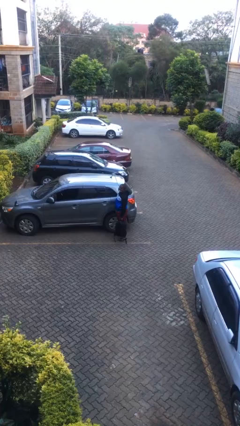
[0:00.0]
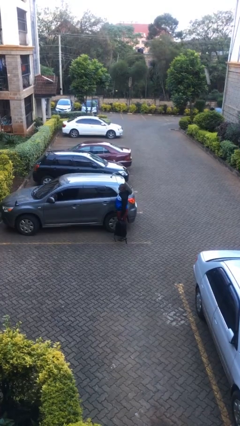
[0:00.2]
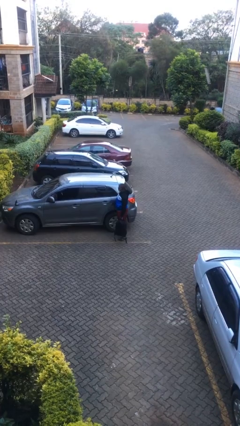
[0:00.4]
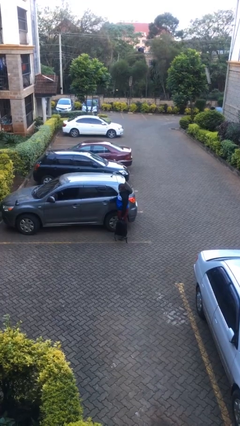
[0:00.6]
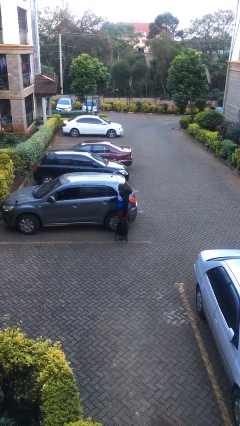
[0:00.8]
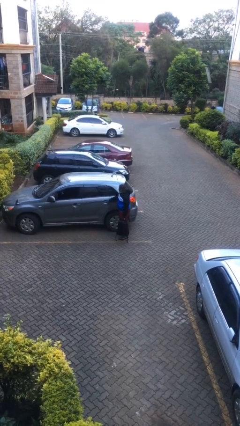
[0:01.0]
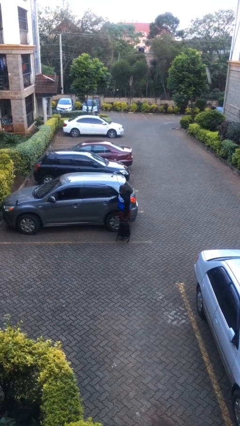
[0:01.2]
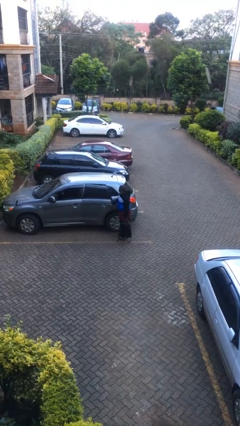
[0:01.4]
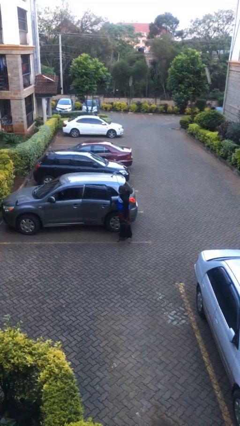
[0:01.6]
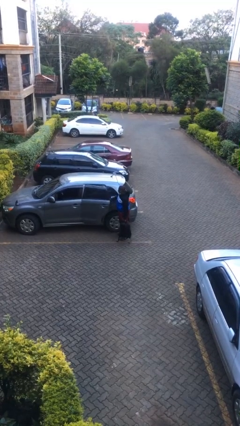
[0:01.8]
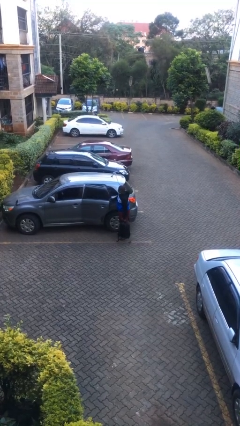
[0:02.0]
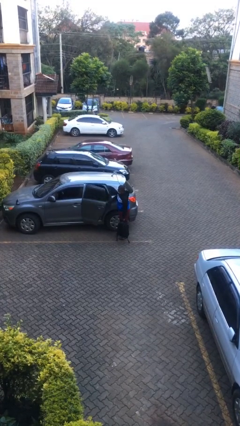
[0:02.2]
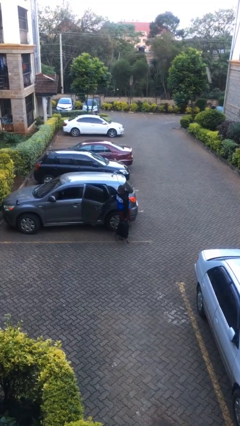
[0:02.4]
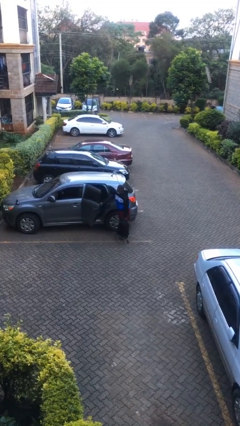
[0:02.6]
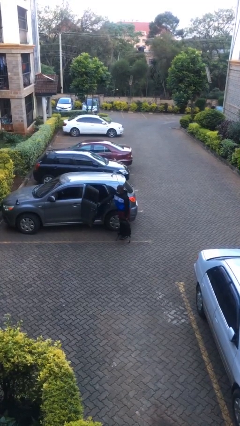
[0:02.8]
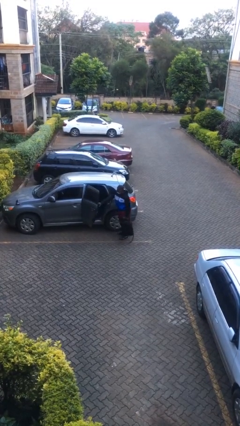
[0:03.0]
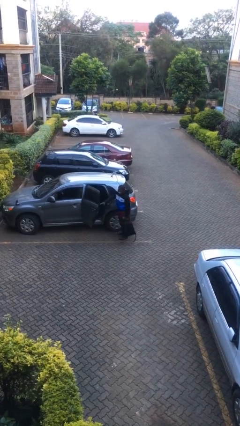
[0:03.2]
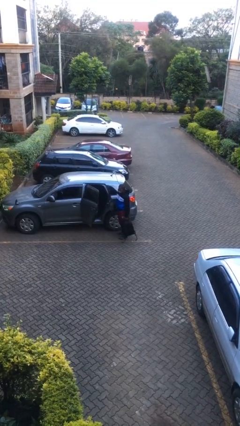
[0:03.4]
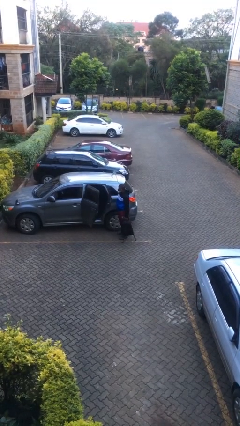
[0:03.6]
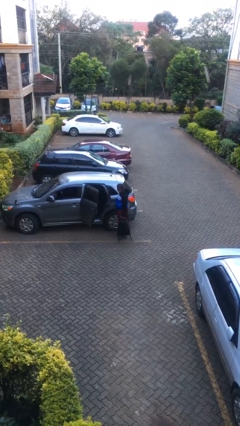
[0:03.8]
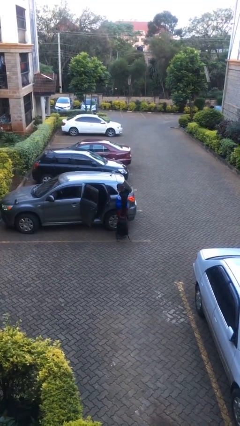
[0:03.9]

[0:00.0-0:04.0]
person opens car door

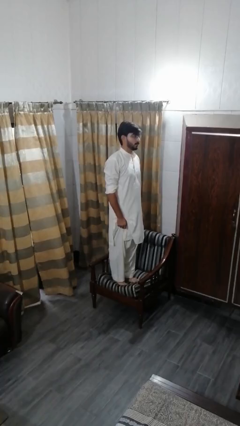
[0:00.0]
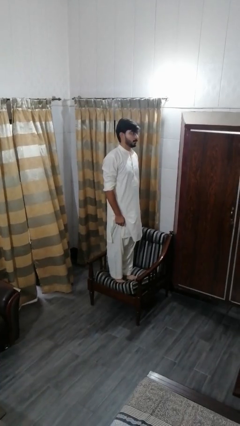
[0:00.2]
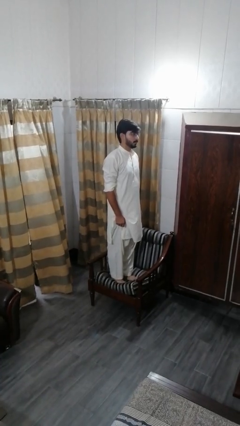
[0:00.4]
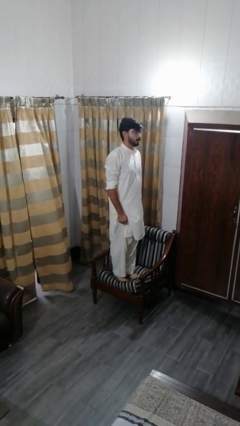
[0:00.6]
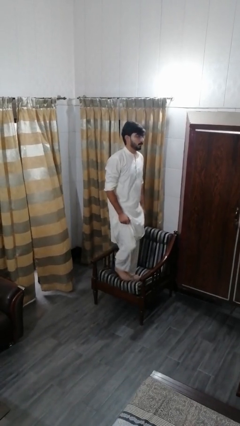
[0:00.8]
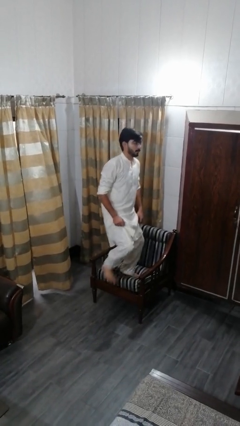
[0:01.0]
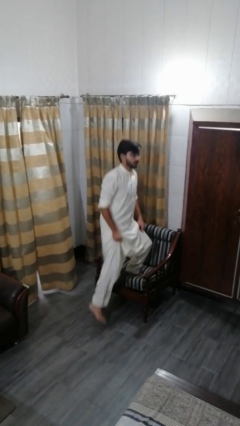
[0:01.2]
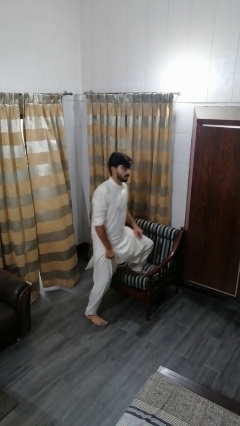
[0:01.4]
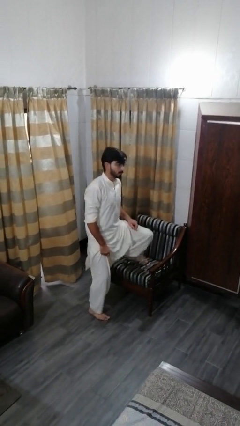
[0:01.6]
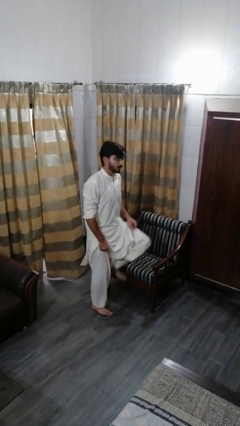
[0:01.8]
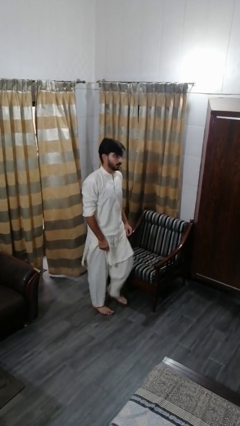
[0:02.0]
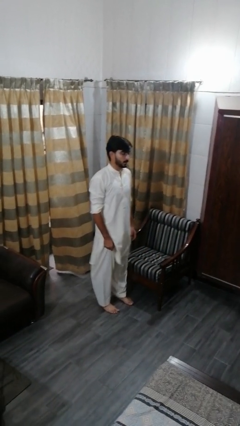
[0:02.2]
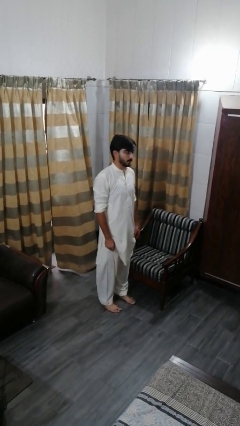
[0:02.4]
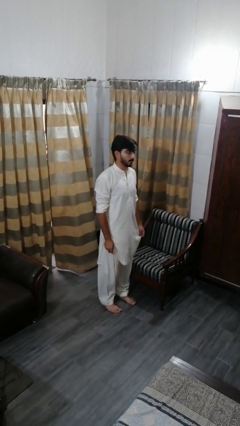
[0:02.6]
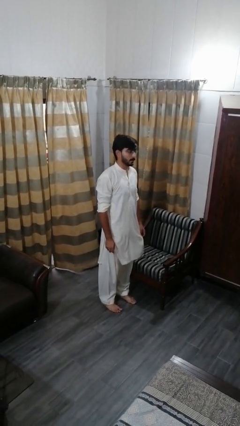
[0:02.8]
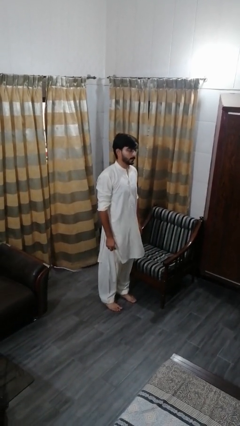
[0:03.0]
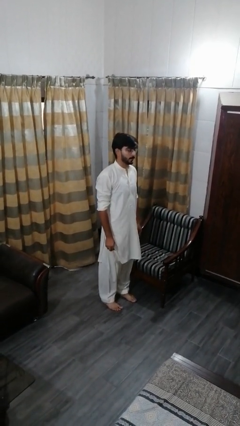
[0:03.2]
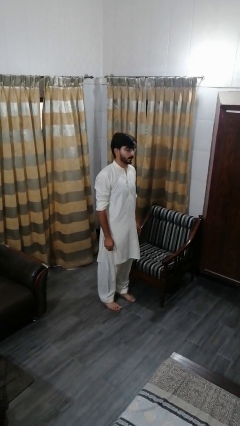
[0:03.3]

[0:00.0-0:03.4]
person climbs off chair

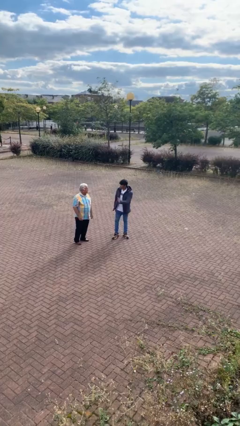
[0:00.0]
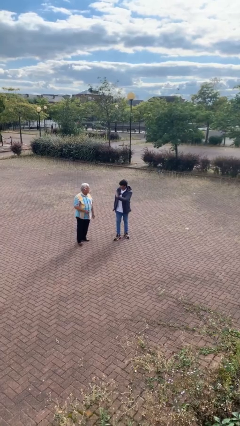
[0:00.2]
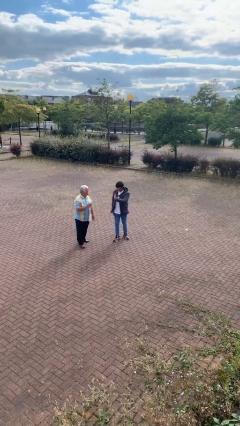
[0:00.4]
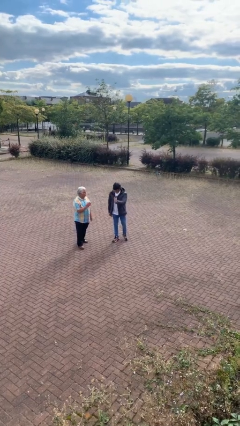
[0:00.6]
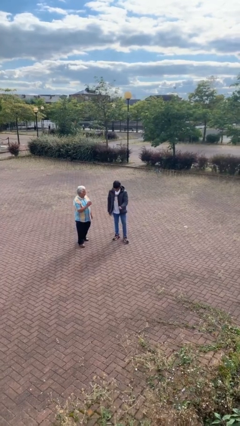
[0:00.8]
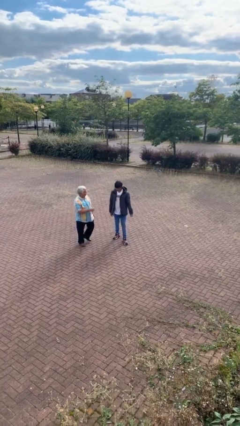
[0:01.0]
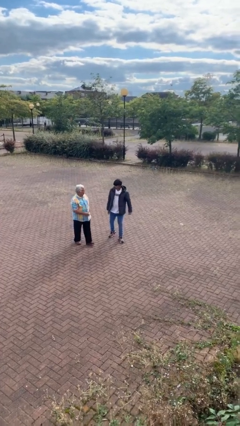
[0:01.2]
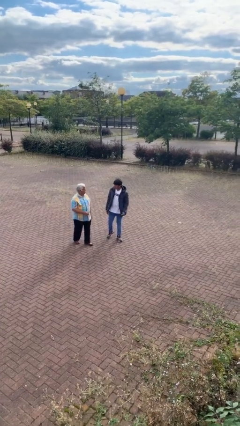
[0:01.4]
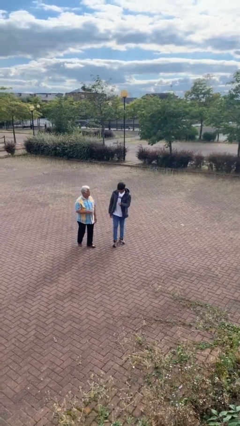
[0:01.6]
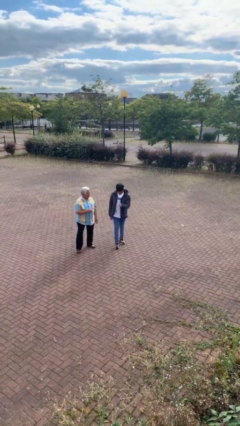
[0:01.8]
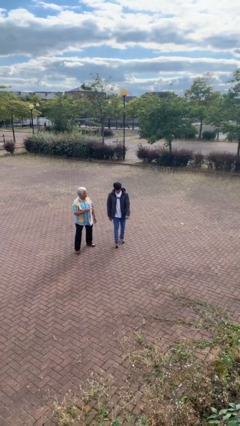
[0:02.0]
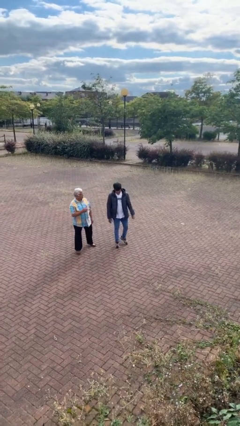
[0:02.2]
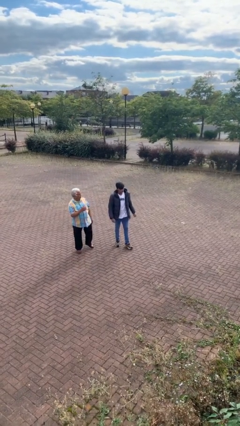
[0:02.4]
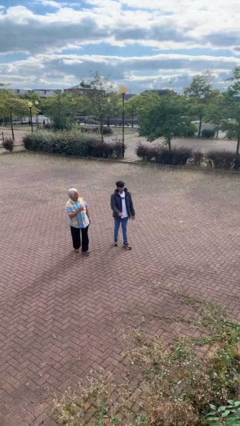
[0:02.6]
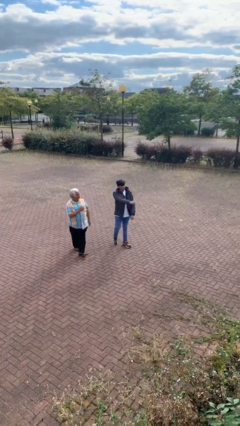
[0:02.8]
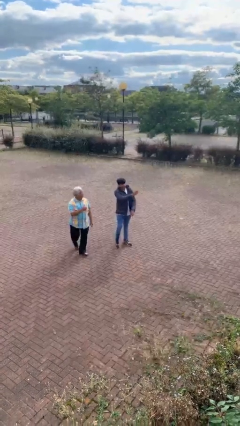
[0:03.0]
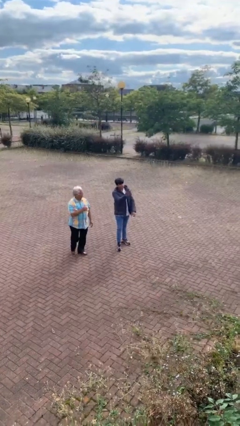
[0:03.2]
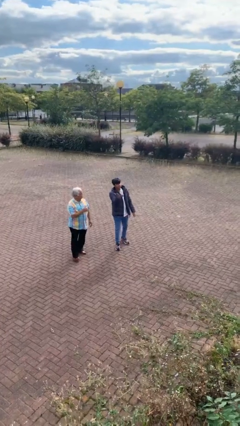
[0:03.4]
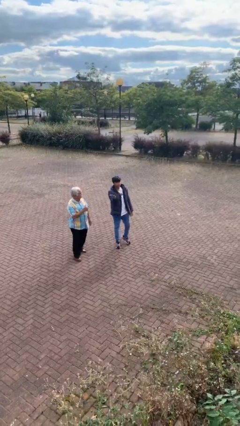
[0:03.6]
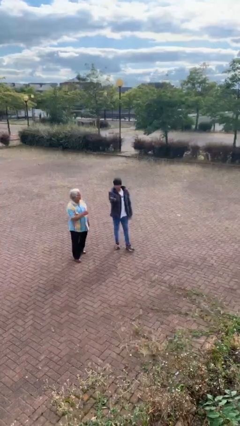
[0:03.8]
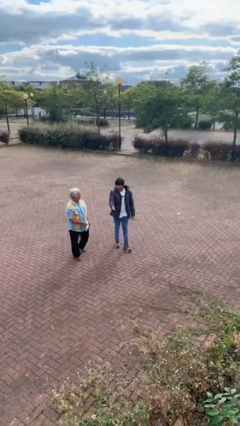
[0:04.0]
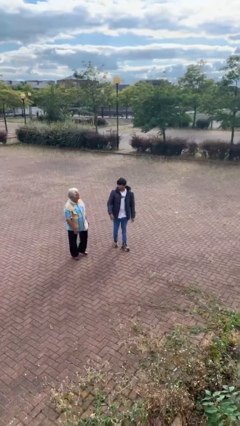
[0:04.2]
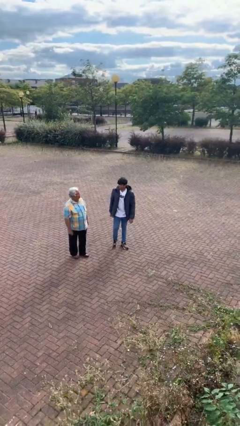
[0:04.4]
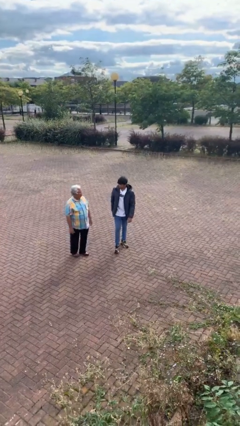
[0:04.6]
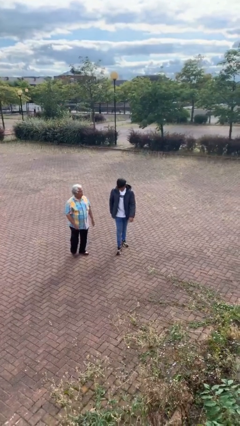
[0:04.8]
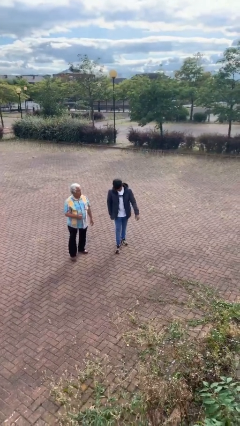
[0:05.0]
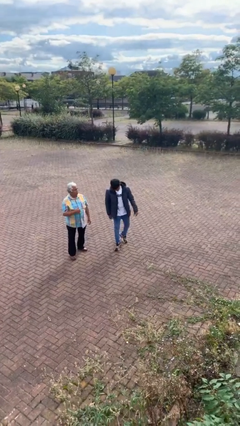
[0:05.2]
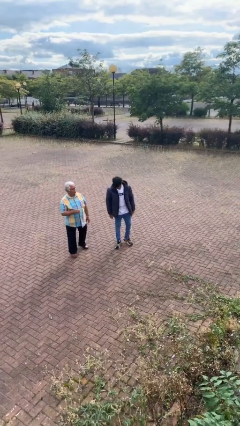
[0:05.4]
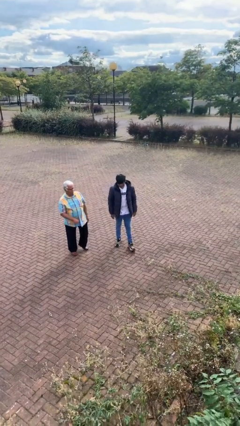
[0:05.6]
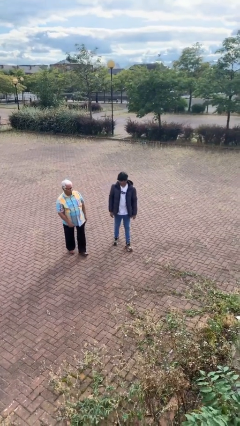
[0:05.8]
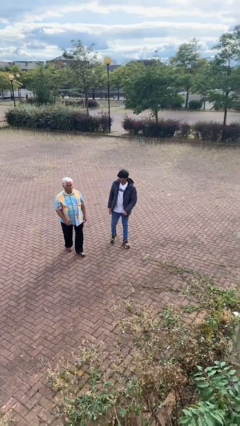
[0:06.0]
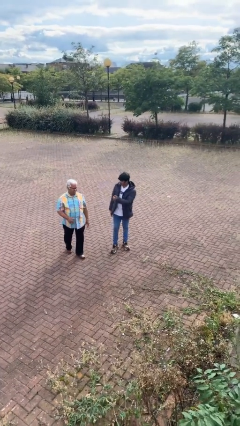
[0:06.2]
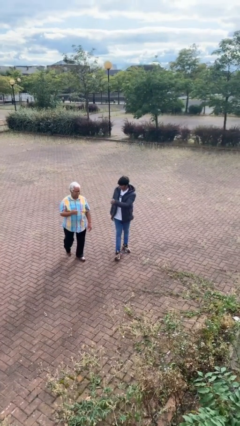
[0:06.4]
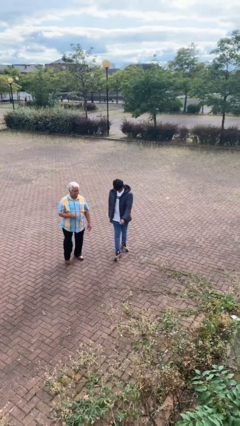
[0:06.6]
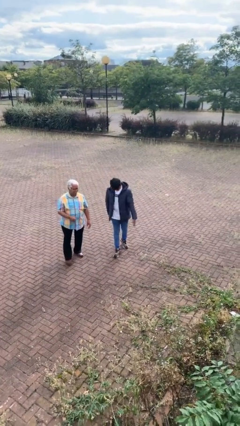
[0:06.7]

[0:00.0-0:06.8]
person talks to person

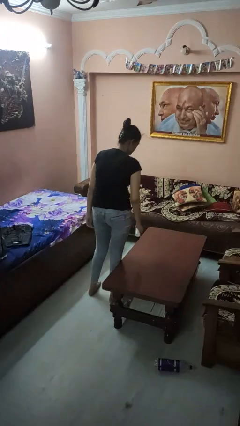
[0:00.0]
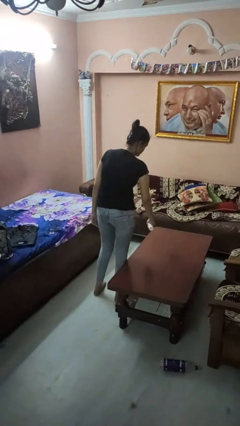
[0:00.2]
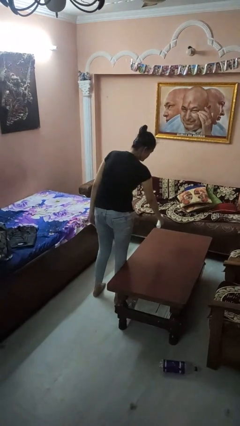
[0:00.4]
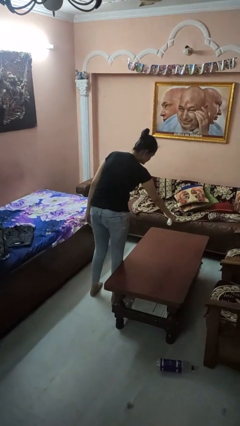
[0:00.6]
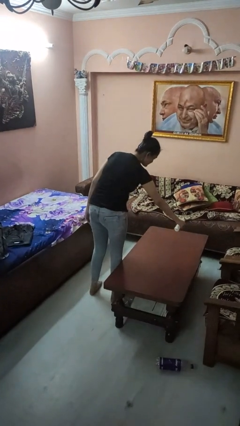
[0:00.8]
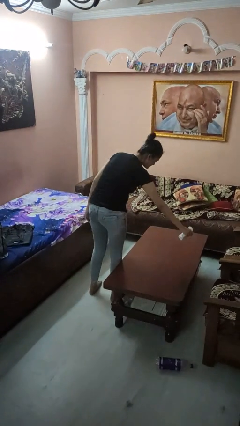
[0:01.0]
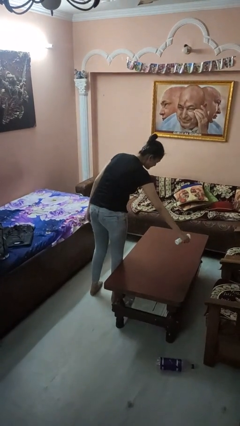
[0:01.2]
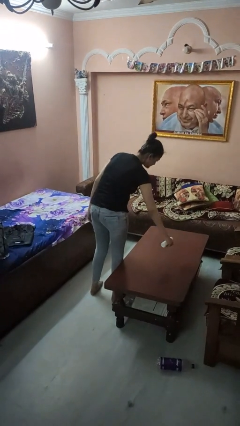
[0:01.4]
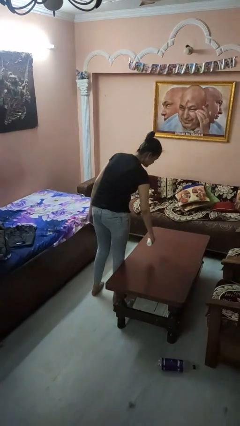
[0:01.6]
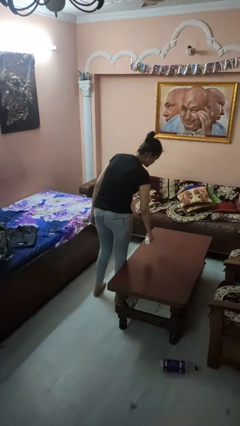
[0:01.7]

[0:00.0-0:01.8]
person sprays from bottle

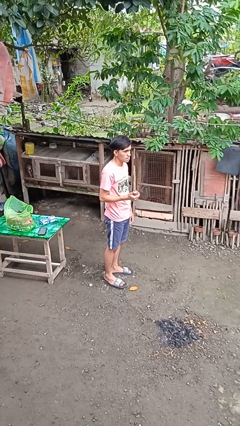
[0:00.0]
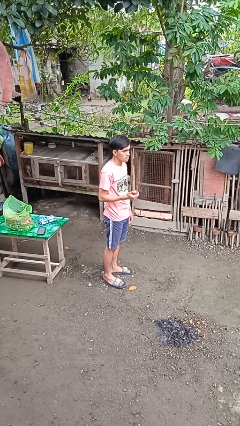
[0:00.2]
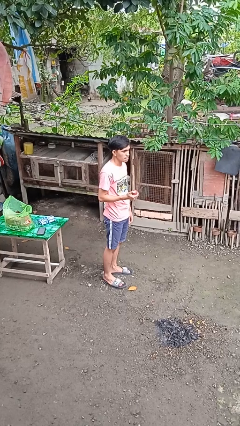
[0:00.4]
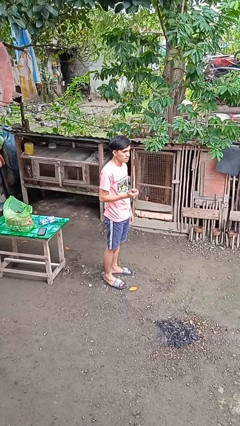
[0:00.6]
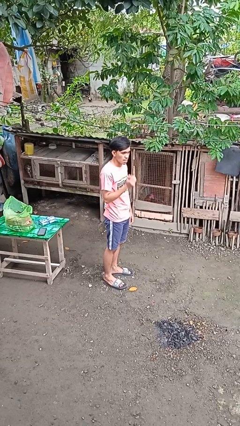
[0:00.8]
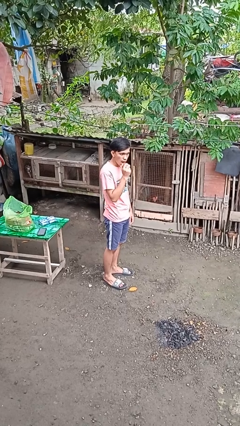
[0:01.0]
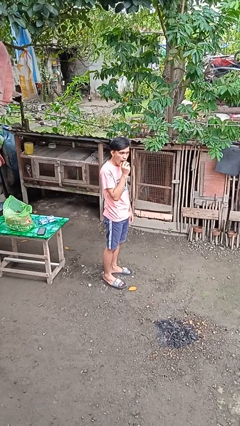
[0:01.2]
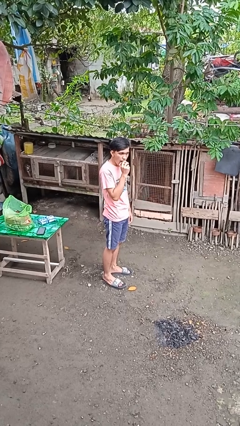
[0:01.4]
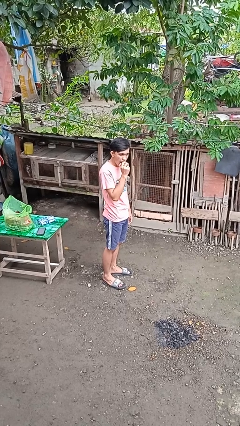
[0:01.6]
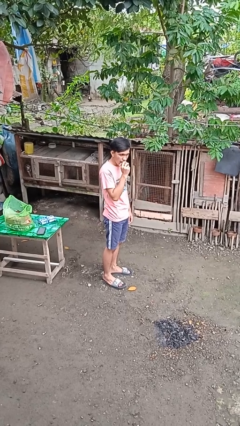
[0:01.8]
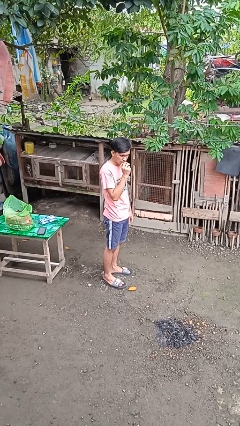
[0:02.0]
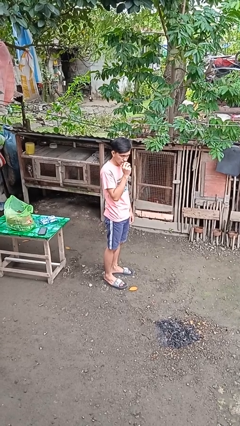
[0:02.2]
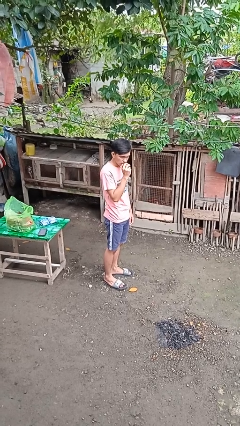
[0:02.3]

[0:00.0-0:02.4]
person eats apple
